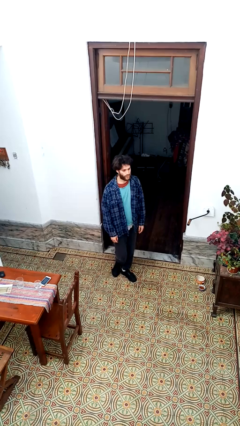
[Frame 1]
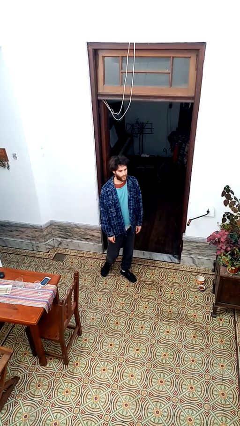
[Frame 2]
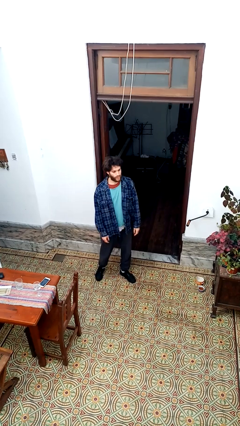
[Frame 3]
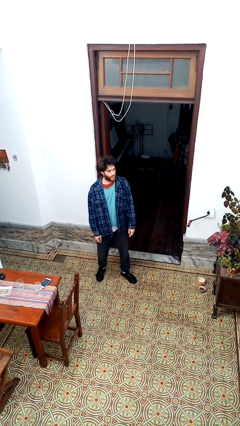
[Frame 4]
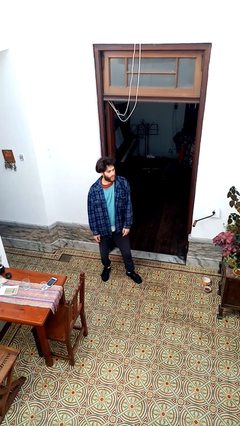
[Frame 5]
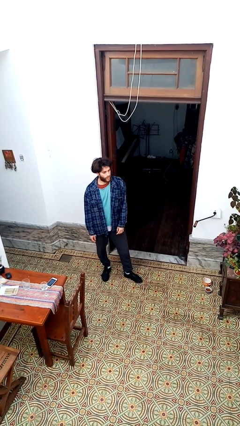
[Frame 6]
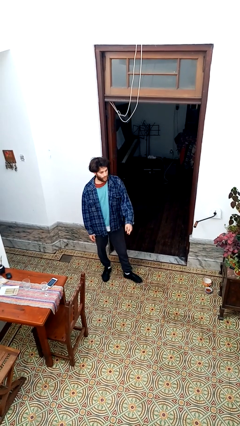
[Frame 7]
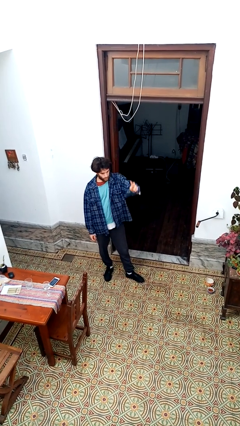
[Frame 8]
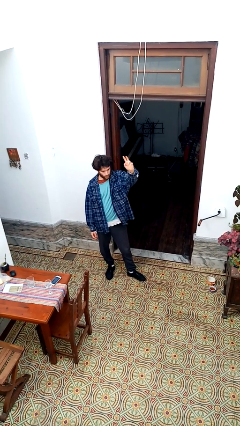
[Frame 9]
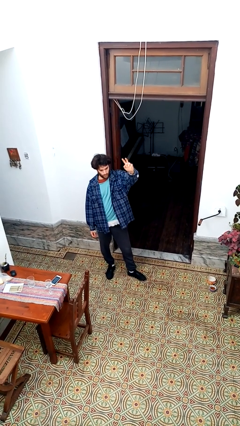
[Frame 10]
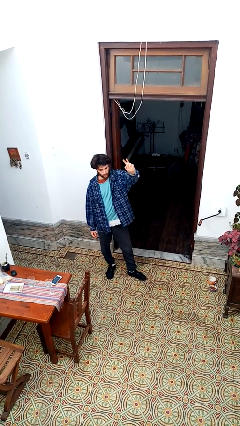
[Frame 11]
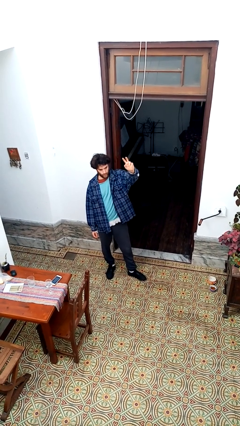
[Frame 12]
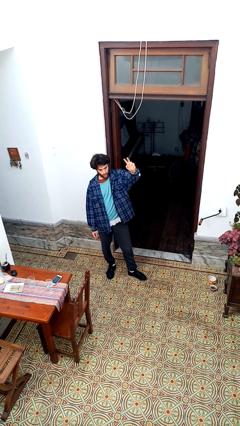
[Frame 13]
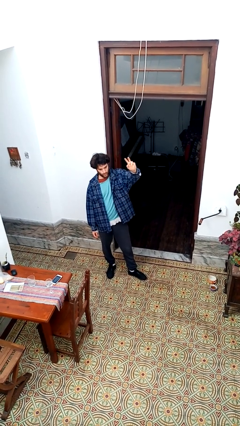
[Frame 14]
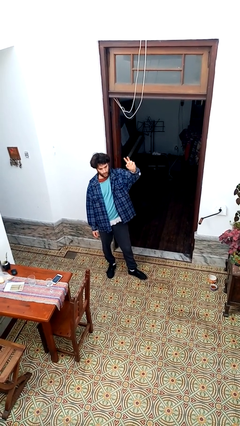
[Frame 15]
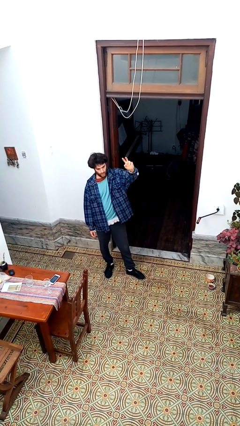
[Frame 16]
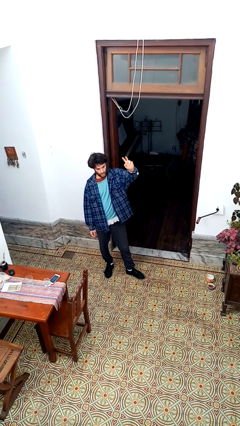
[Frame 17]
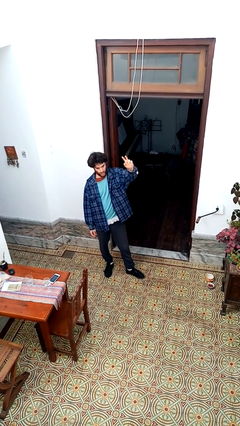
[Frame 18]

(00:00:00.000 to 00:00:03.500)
person gestures raise hand

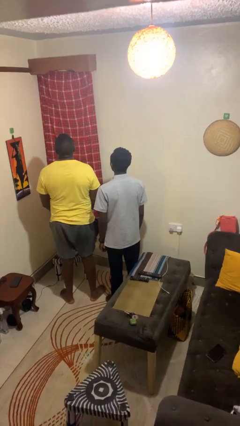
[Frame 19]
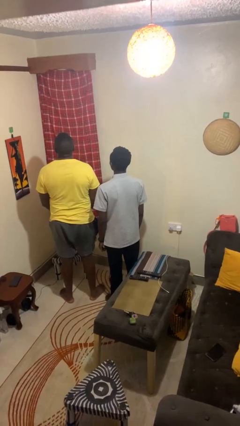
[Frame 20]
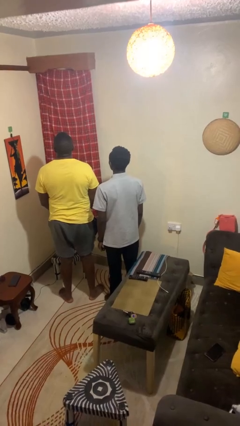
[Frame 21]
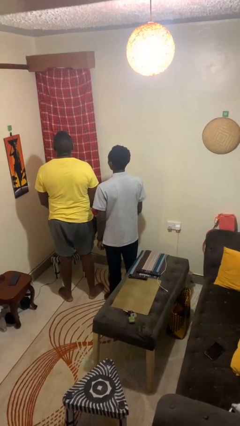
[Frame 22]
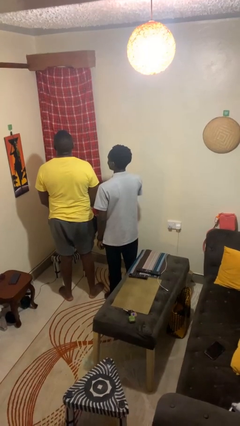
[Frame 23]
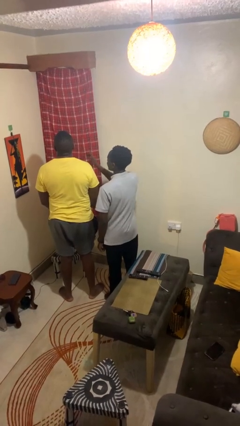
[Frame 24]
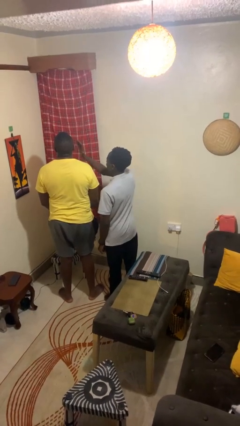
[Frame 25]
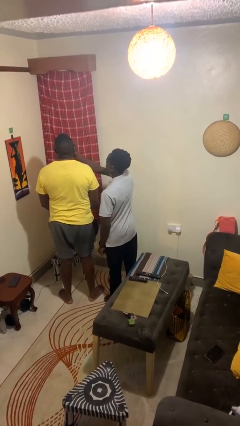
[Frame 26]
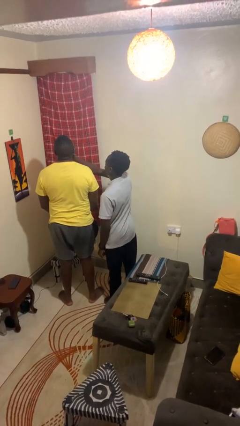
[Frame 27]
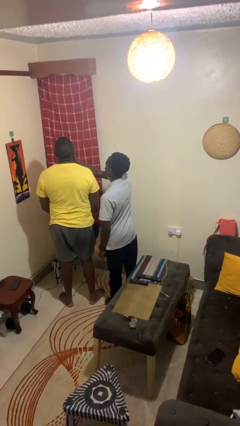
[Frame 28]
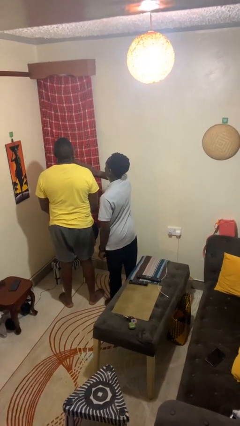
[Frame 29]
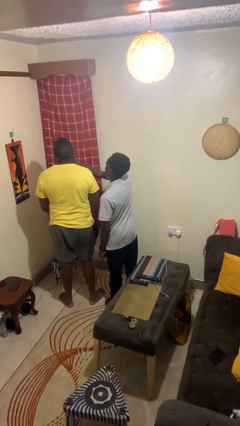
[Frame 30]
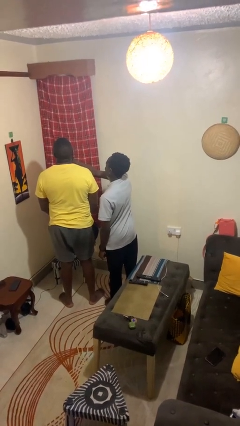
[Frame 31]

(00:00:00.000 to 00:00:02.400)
person touches face of person

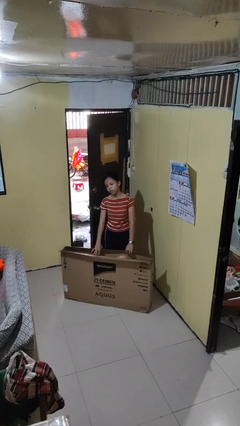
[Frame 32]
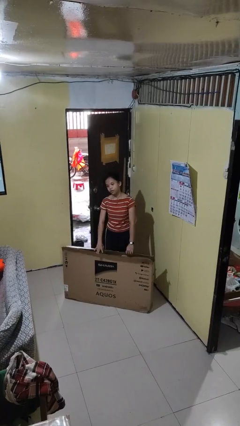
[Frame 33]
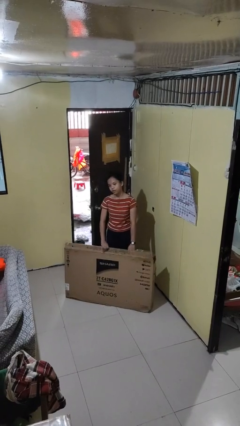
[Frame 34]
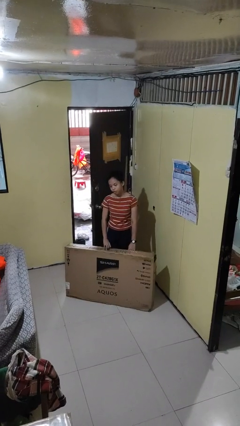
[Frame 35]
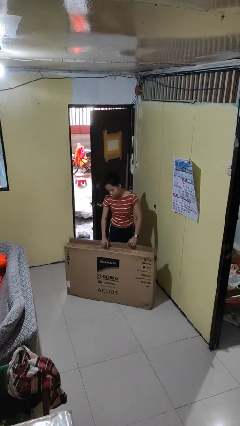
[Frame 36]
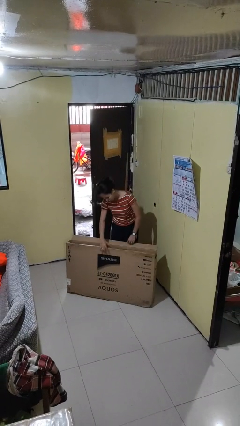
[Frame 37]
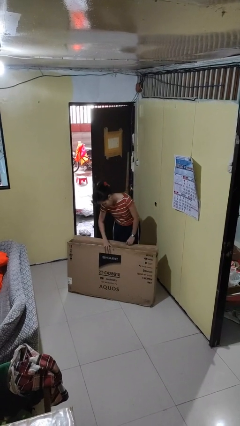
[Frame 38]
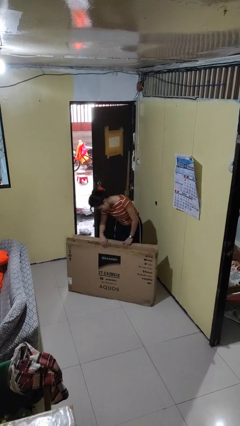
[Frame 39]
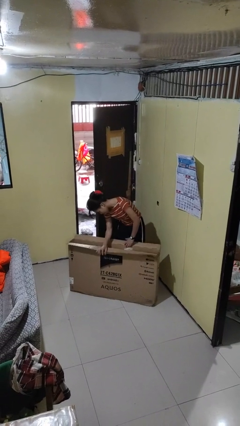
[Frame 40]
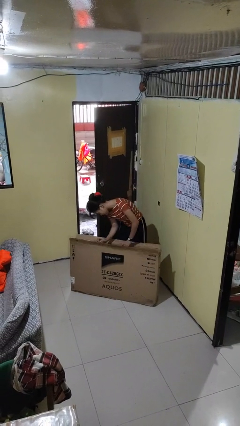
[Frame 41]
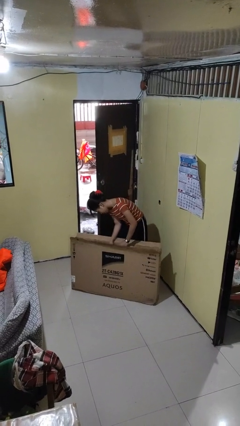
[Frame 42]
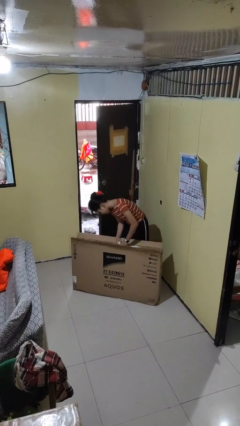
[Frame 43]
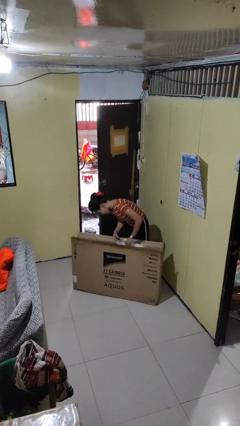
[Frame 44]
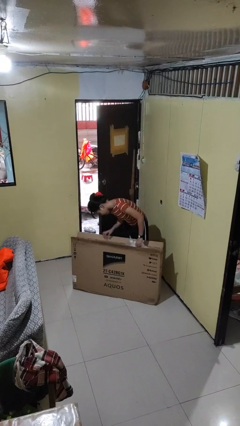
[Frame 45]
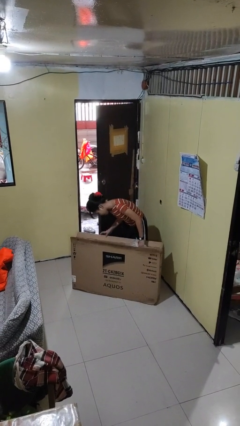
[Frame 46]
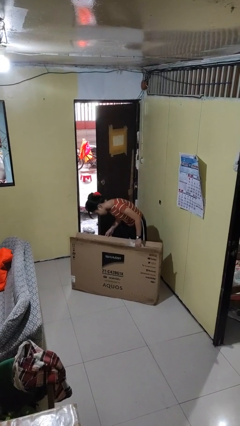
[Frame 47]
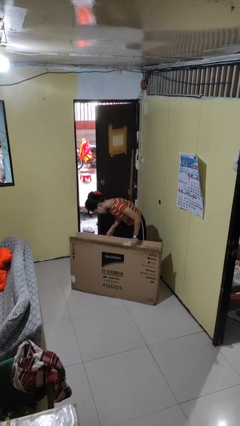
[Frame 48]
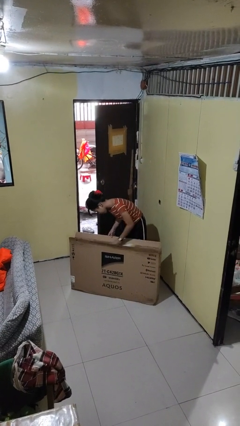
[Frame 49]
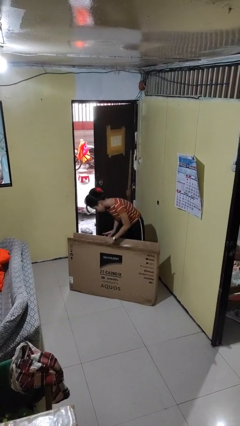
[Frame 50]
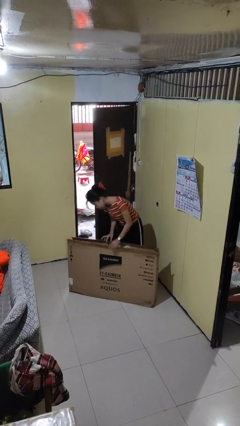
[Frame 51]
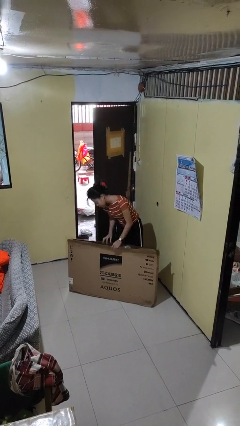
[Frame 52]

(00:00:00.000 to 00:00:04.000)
person searches in box

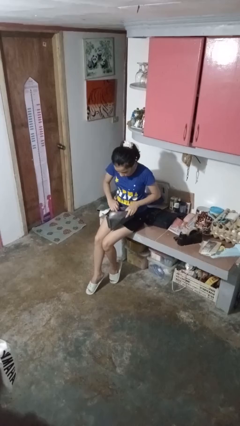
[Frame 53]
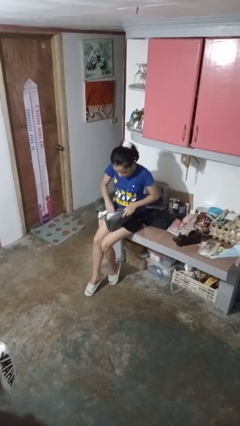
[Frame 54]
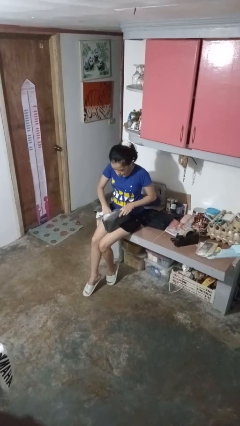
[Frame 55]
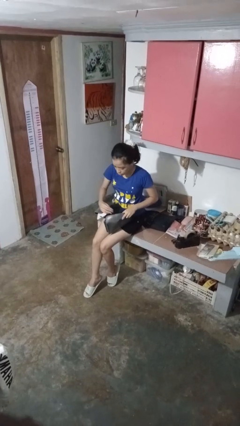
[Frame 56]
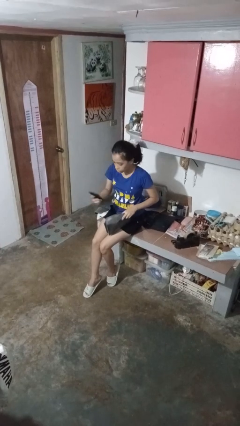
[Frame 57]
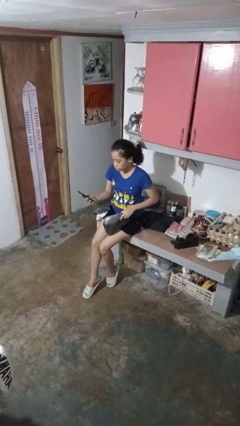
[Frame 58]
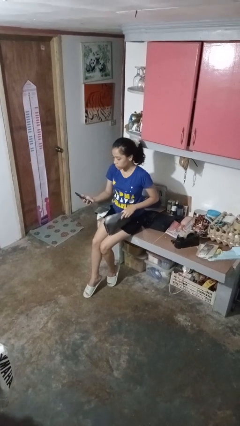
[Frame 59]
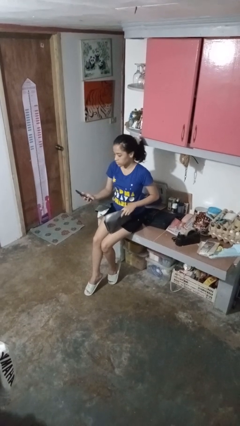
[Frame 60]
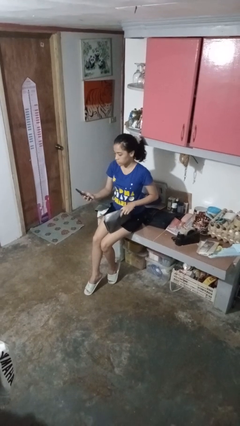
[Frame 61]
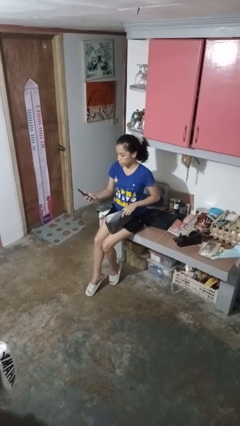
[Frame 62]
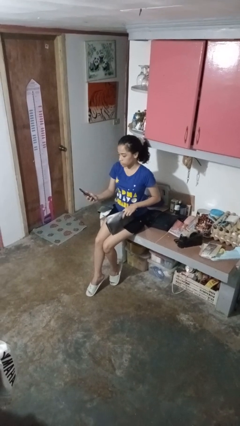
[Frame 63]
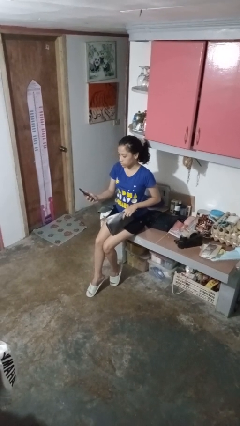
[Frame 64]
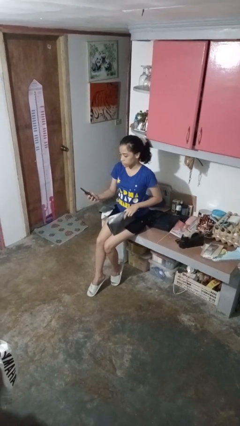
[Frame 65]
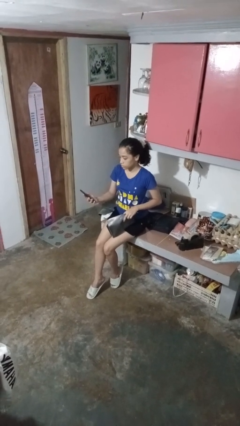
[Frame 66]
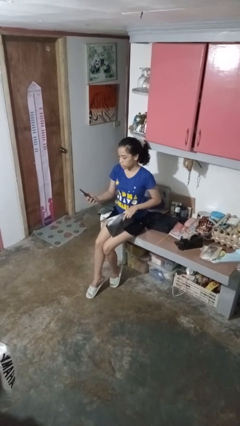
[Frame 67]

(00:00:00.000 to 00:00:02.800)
person takes object from purse

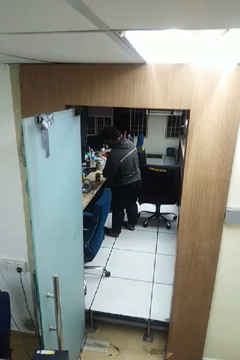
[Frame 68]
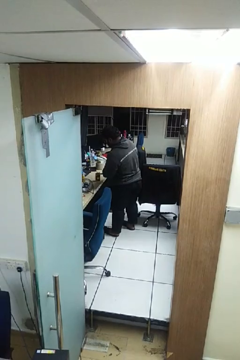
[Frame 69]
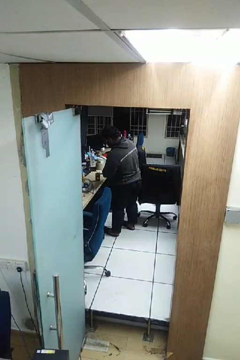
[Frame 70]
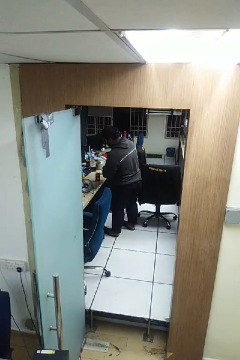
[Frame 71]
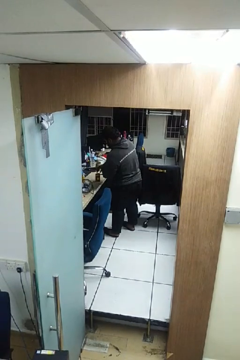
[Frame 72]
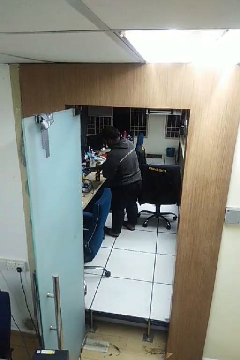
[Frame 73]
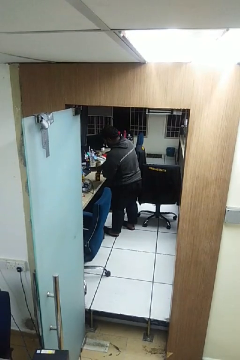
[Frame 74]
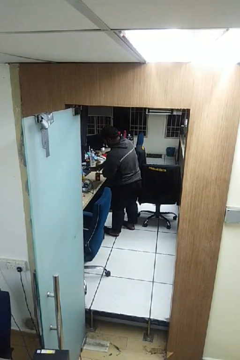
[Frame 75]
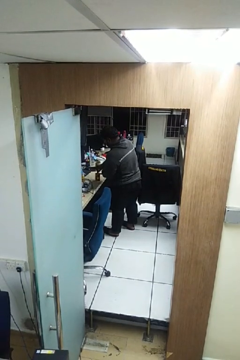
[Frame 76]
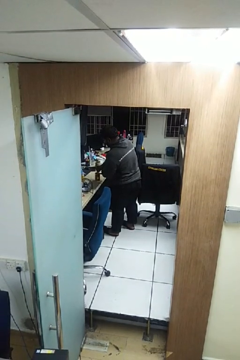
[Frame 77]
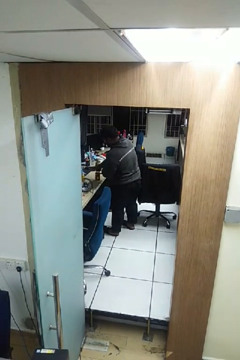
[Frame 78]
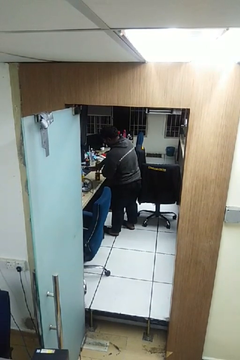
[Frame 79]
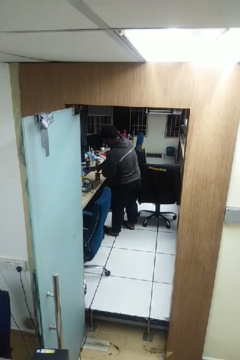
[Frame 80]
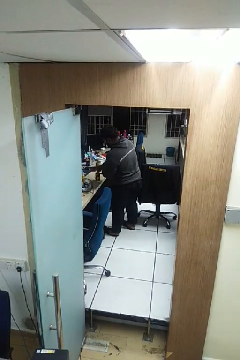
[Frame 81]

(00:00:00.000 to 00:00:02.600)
person opens can with can opener

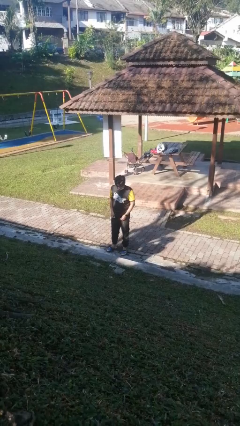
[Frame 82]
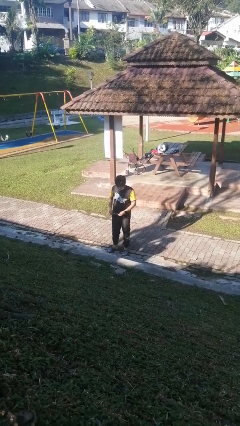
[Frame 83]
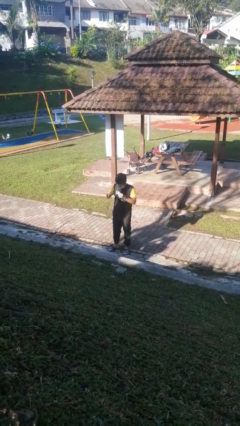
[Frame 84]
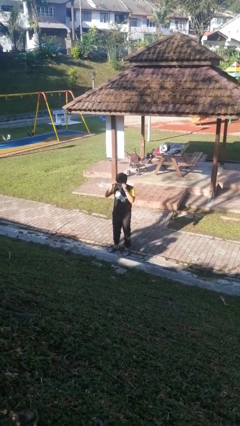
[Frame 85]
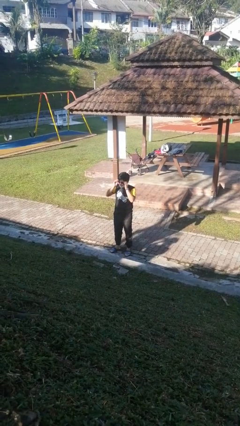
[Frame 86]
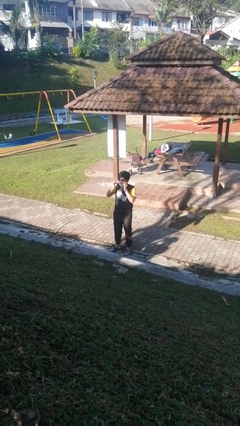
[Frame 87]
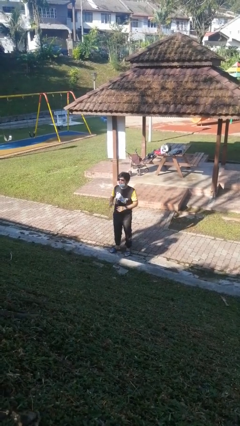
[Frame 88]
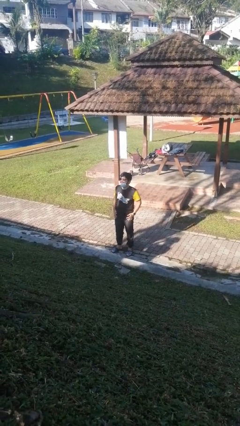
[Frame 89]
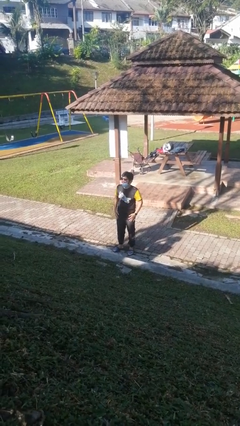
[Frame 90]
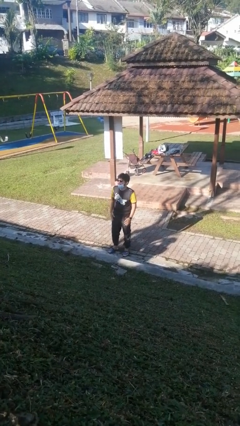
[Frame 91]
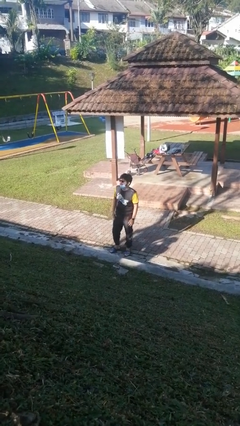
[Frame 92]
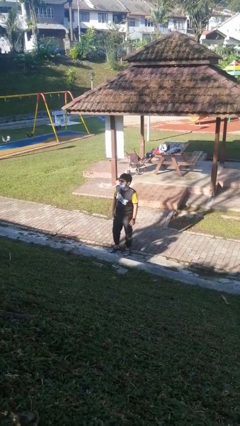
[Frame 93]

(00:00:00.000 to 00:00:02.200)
person puts on sunglasses

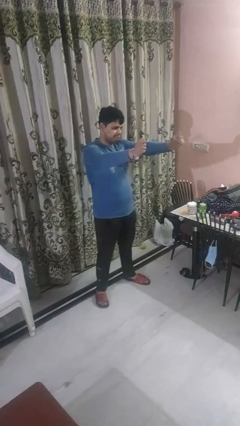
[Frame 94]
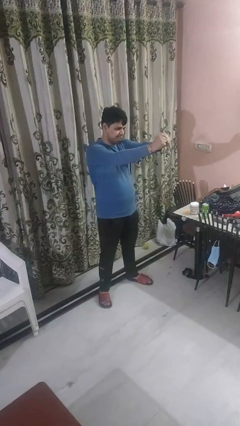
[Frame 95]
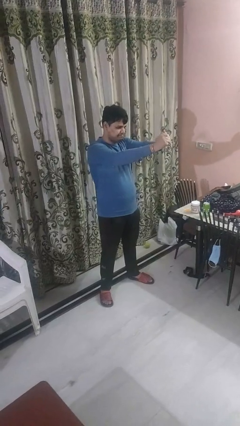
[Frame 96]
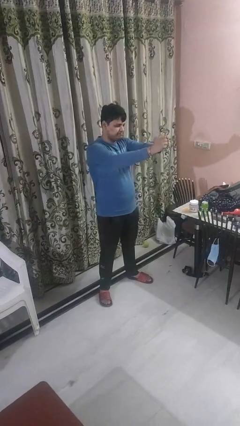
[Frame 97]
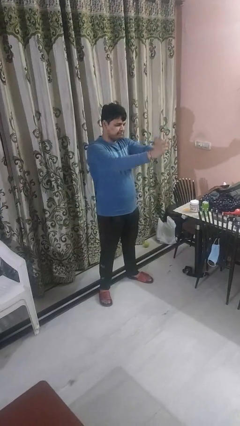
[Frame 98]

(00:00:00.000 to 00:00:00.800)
person gestures zoom out
